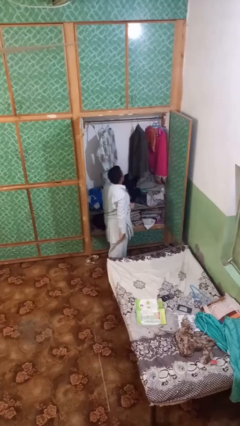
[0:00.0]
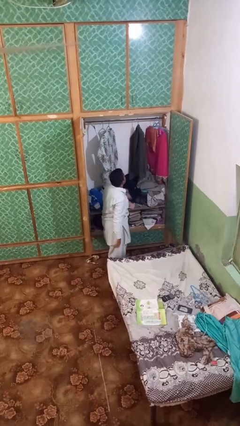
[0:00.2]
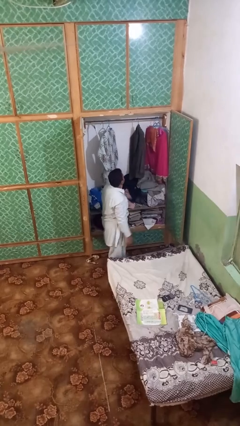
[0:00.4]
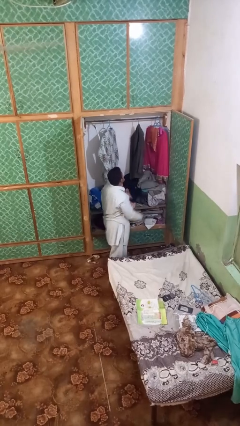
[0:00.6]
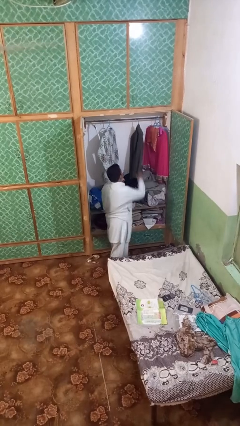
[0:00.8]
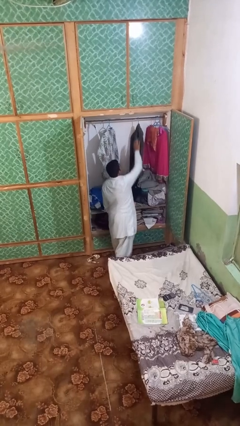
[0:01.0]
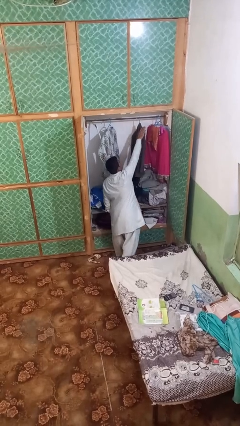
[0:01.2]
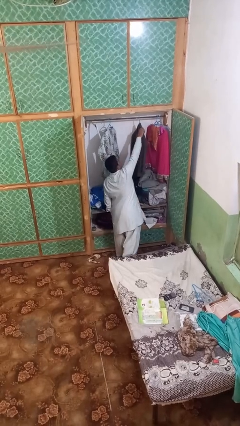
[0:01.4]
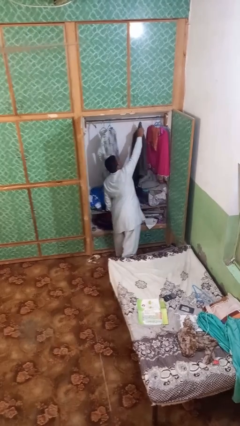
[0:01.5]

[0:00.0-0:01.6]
person takes clothes from closet

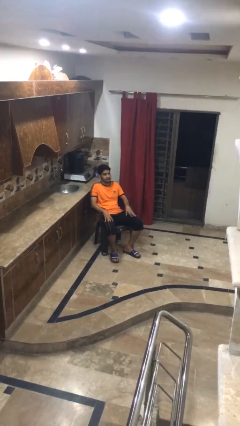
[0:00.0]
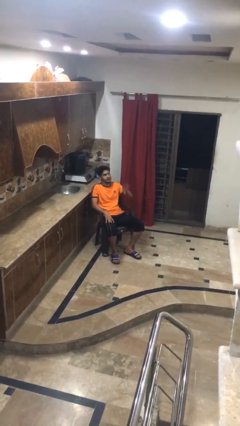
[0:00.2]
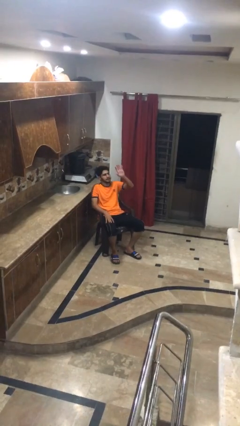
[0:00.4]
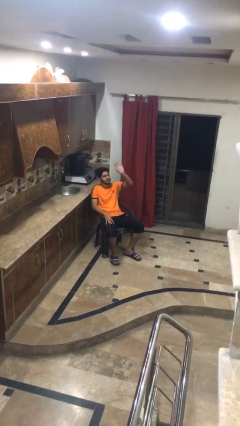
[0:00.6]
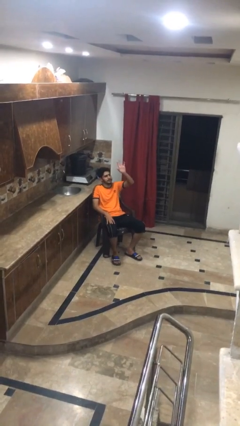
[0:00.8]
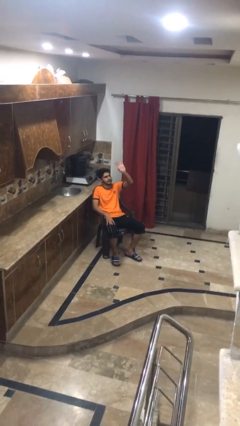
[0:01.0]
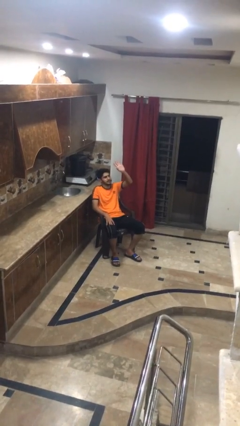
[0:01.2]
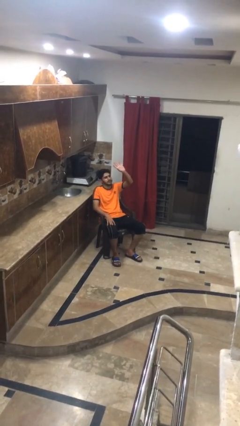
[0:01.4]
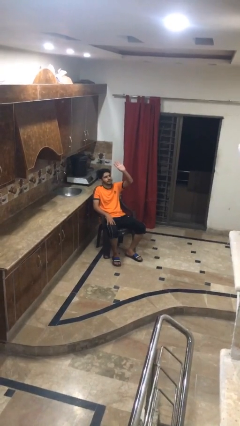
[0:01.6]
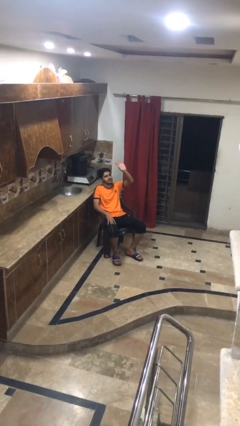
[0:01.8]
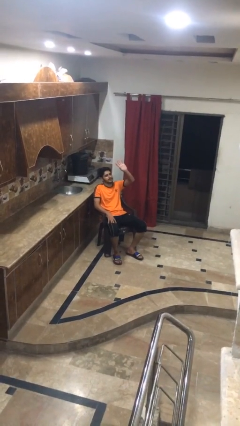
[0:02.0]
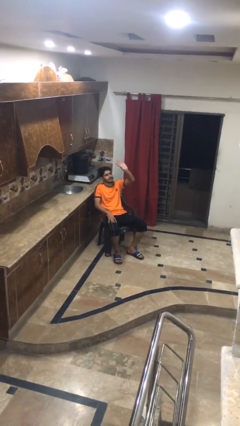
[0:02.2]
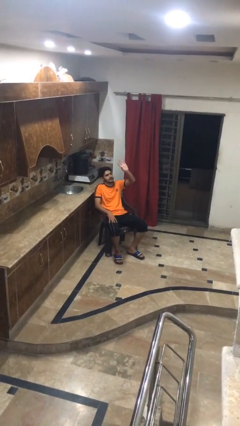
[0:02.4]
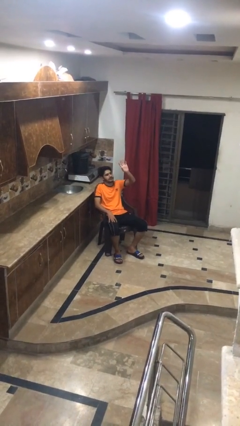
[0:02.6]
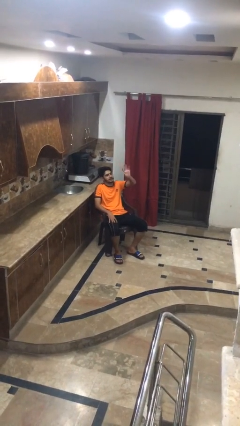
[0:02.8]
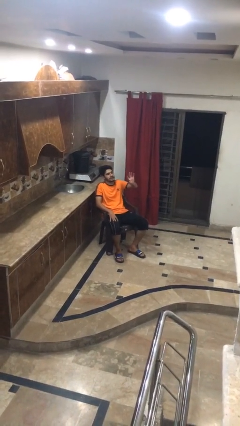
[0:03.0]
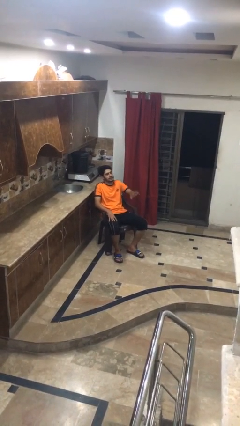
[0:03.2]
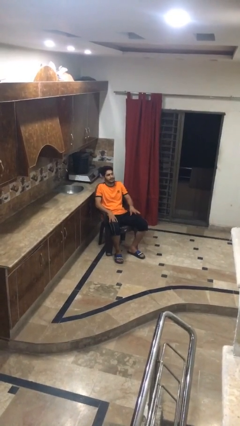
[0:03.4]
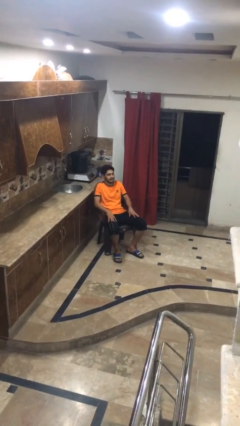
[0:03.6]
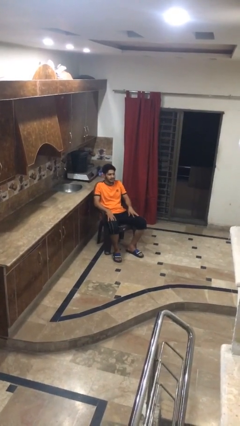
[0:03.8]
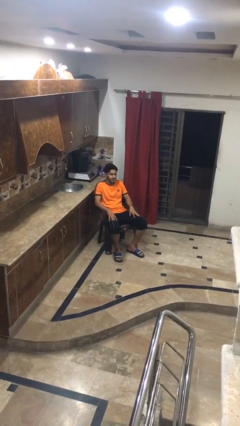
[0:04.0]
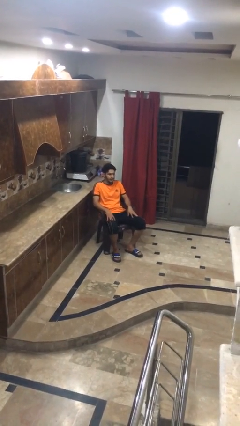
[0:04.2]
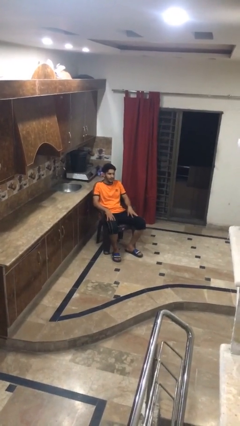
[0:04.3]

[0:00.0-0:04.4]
person waves at person

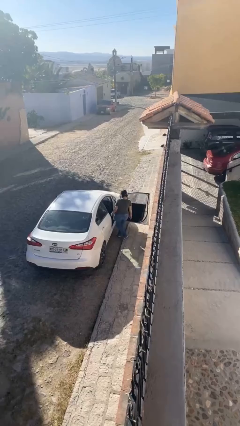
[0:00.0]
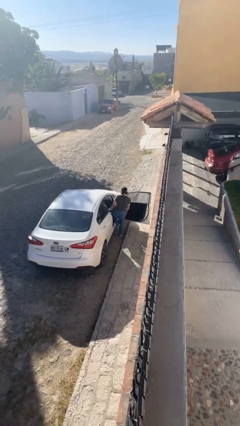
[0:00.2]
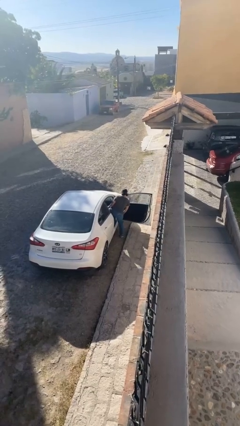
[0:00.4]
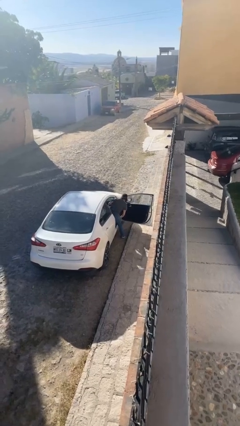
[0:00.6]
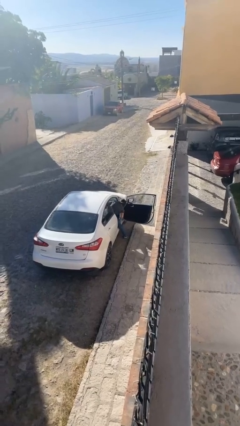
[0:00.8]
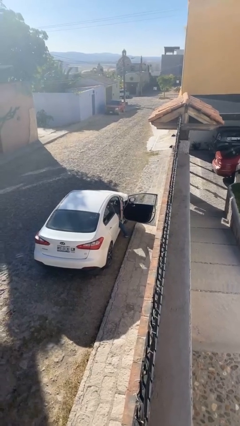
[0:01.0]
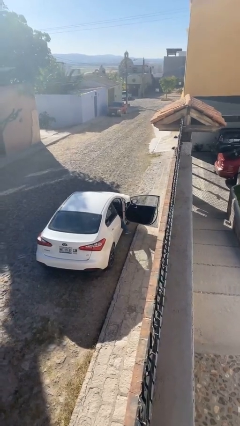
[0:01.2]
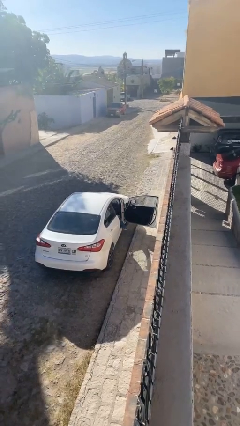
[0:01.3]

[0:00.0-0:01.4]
person enters car

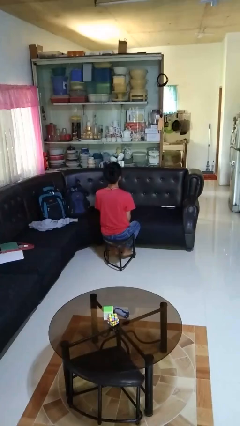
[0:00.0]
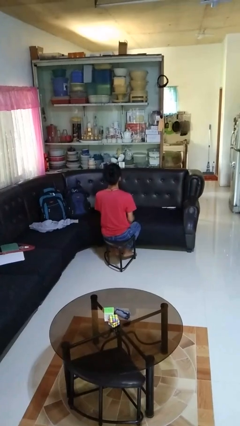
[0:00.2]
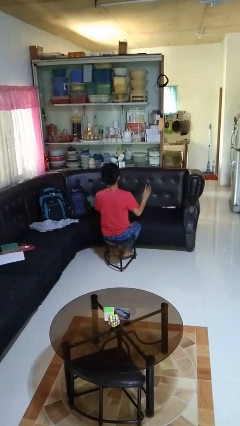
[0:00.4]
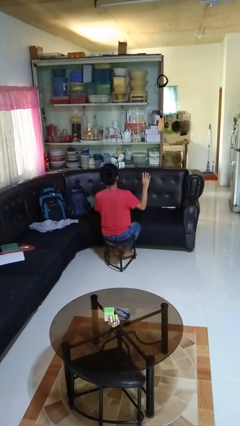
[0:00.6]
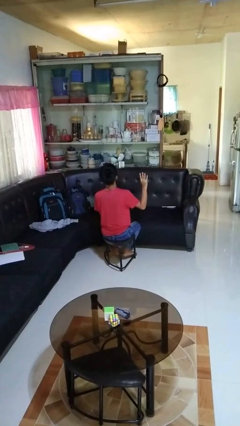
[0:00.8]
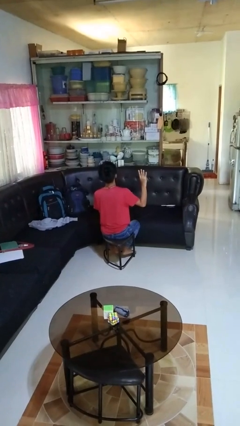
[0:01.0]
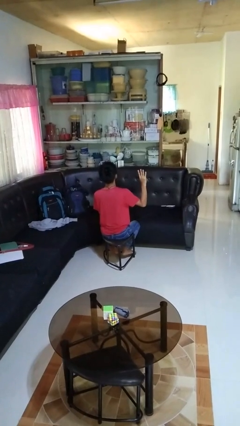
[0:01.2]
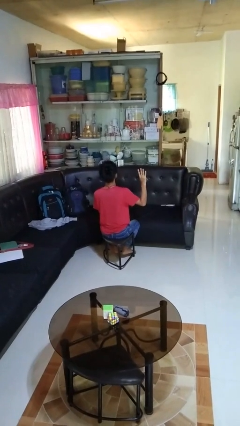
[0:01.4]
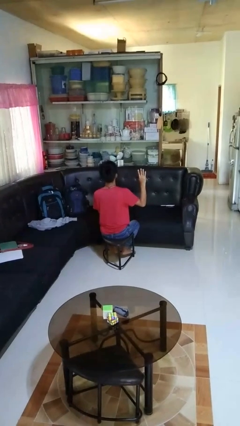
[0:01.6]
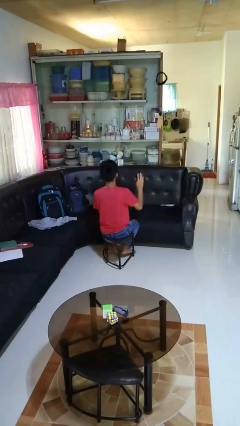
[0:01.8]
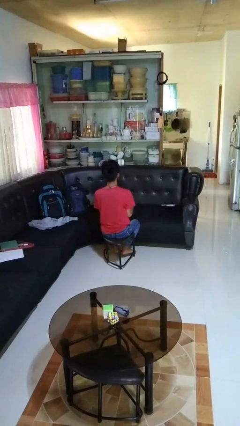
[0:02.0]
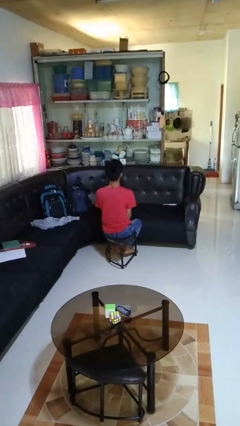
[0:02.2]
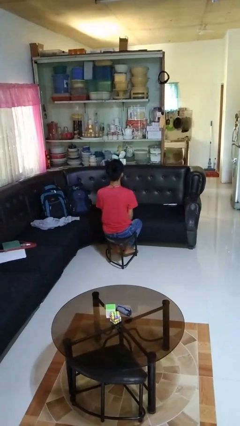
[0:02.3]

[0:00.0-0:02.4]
person gestures number four

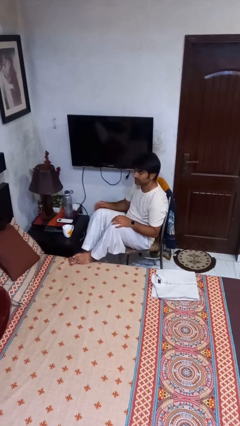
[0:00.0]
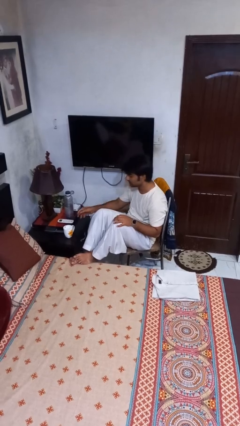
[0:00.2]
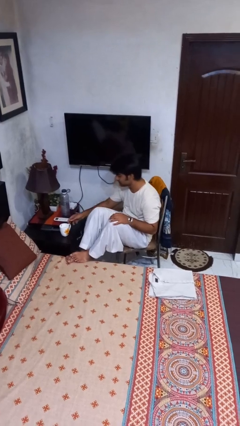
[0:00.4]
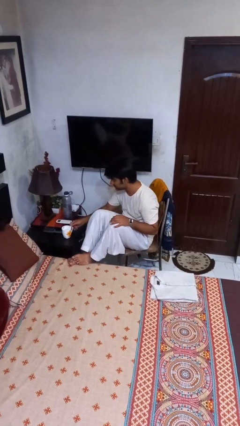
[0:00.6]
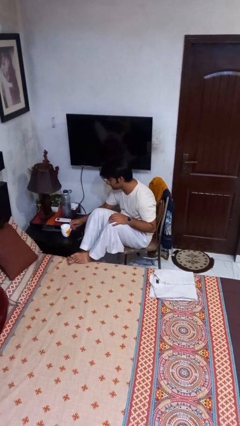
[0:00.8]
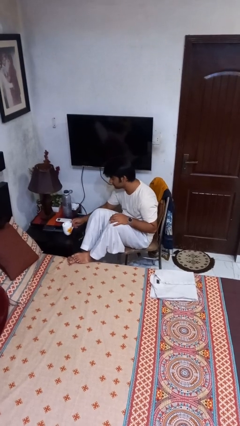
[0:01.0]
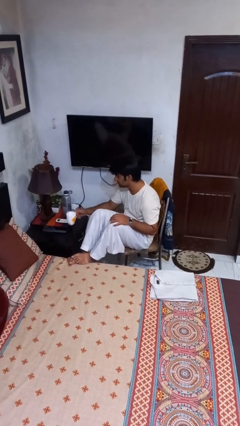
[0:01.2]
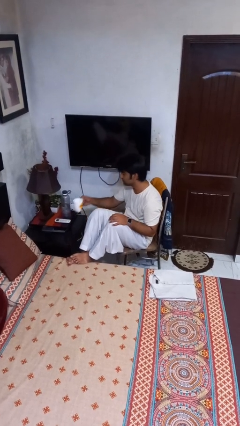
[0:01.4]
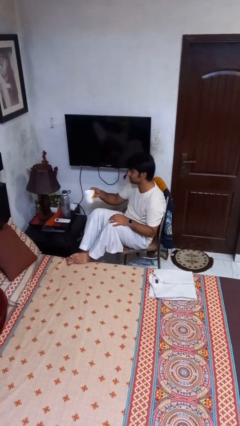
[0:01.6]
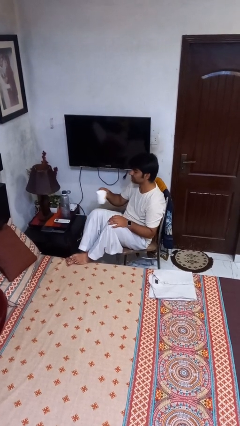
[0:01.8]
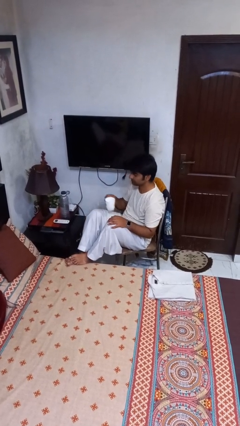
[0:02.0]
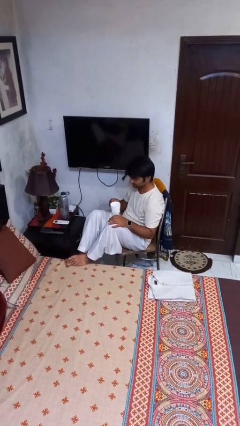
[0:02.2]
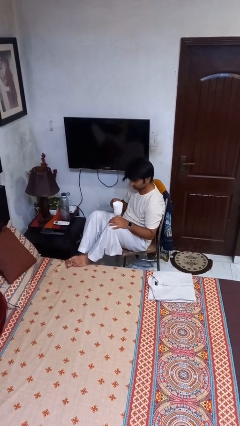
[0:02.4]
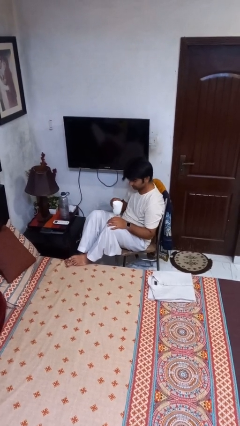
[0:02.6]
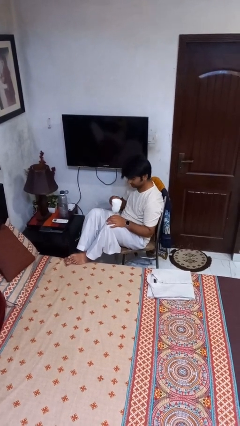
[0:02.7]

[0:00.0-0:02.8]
person picks up object from table

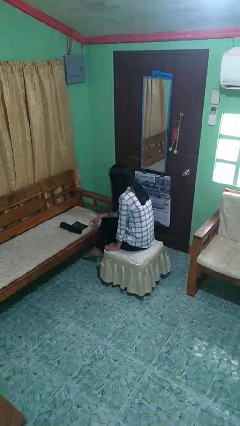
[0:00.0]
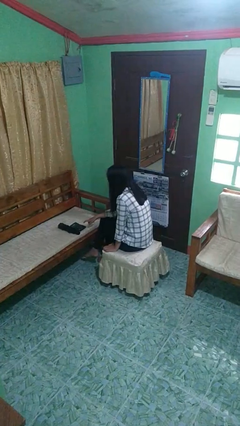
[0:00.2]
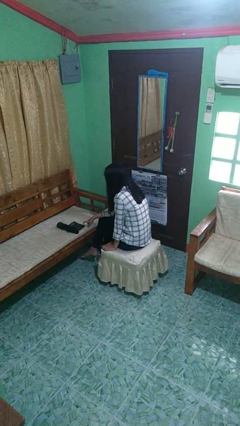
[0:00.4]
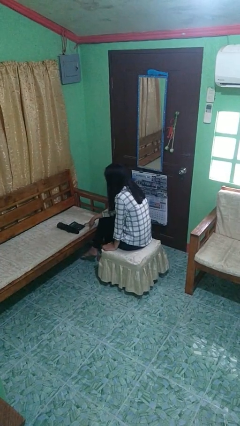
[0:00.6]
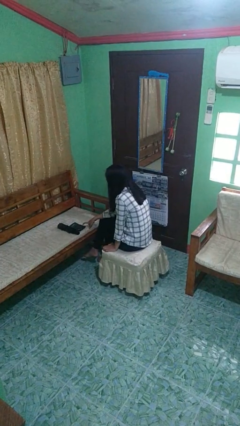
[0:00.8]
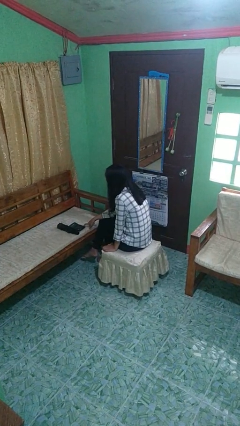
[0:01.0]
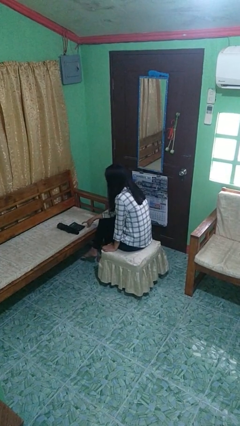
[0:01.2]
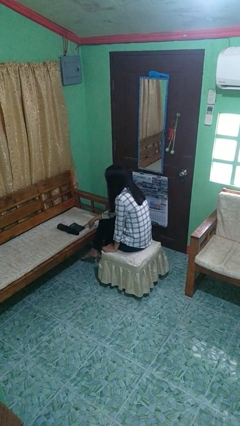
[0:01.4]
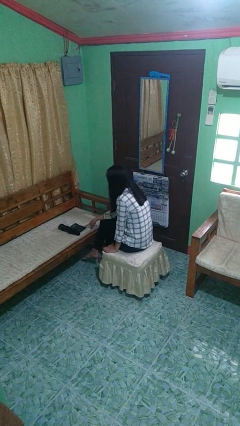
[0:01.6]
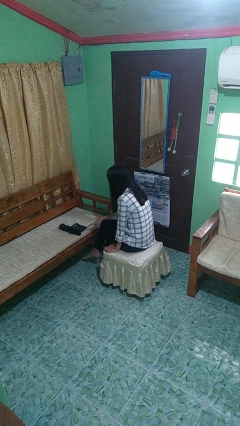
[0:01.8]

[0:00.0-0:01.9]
person taps object with finger

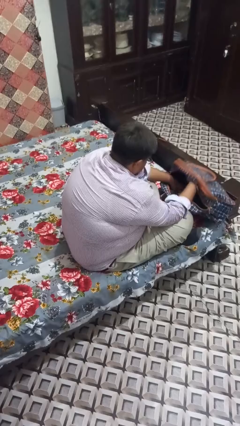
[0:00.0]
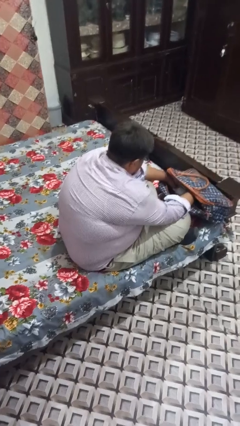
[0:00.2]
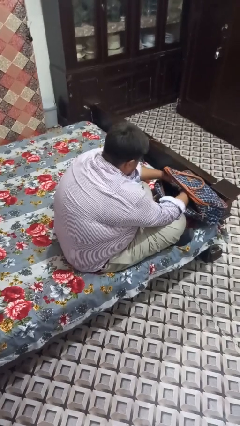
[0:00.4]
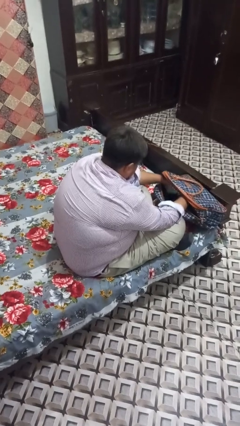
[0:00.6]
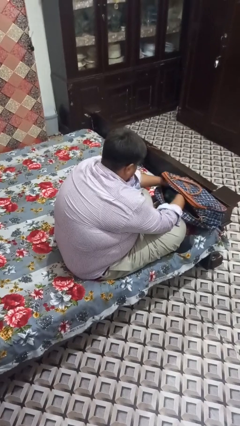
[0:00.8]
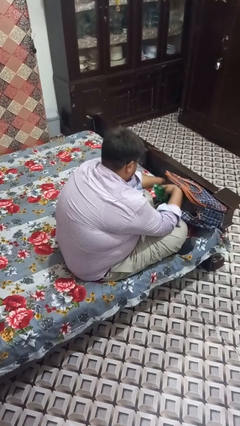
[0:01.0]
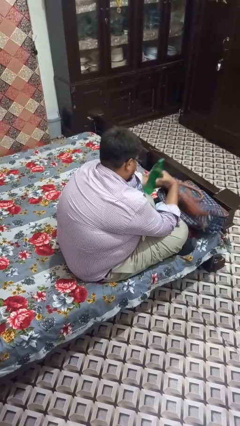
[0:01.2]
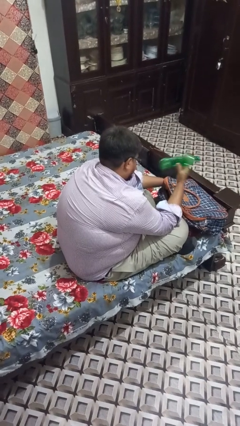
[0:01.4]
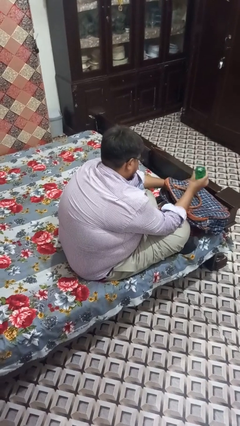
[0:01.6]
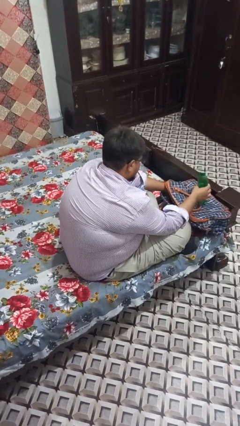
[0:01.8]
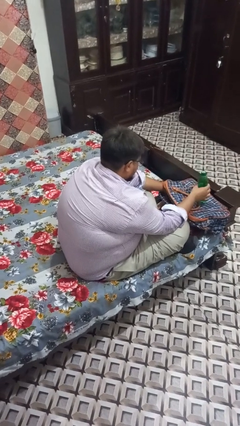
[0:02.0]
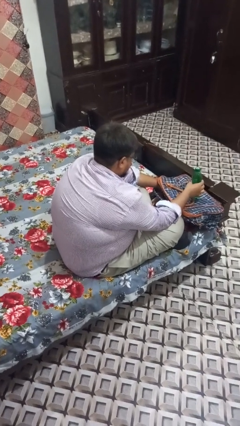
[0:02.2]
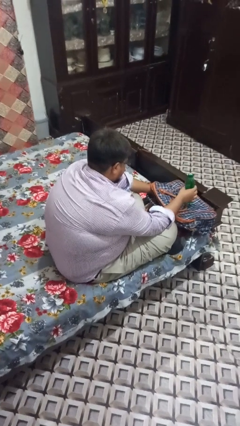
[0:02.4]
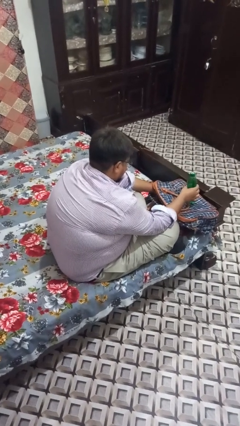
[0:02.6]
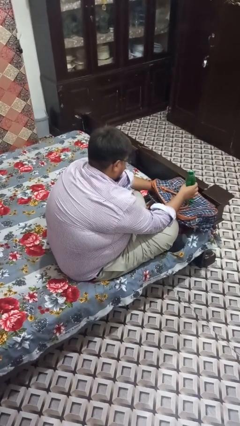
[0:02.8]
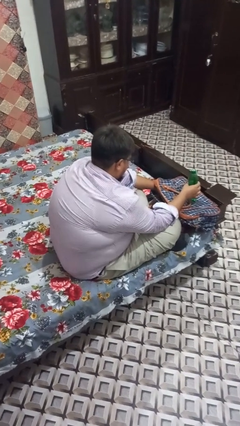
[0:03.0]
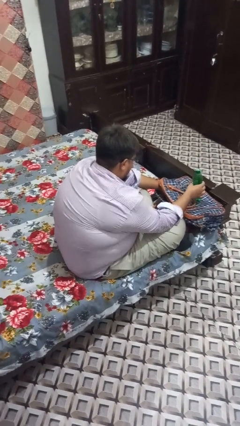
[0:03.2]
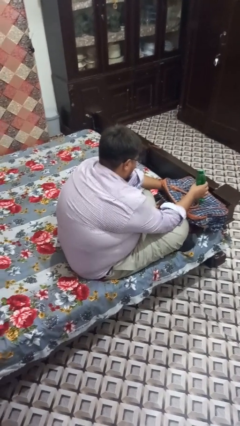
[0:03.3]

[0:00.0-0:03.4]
person takes object from backpack
